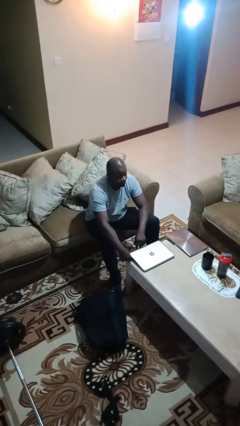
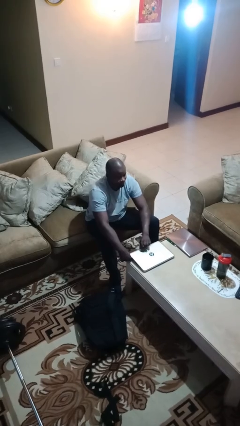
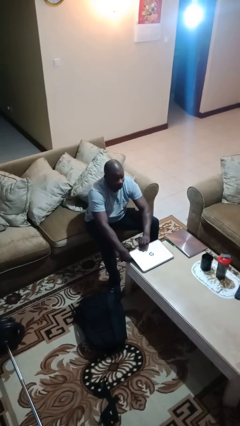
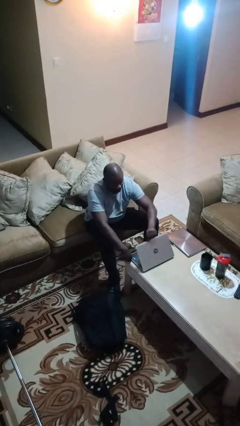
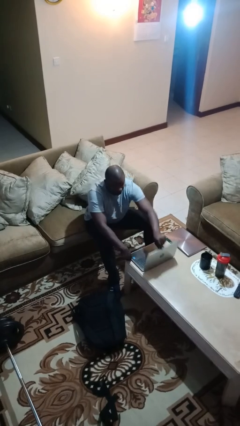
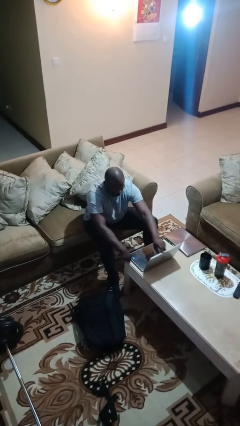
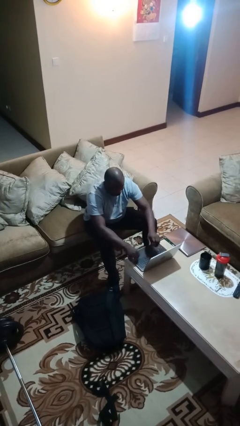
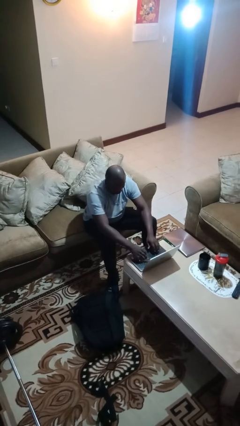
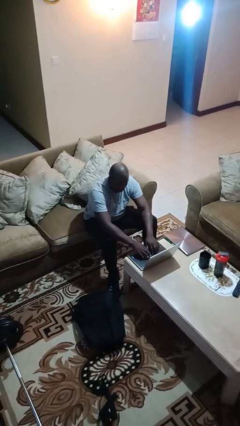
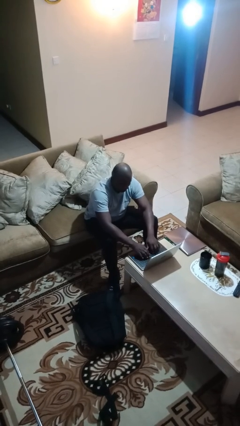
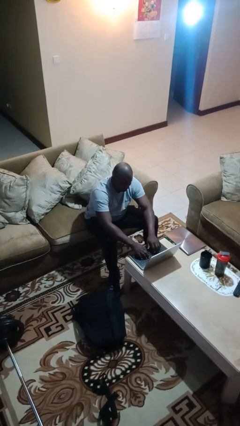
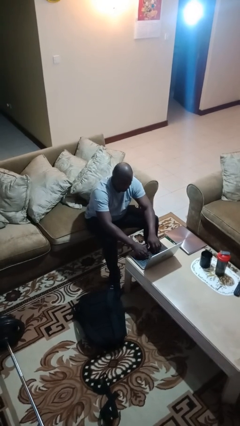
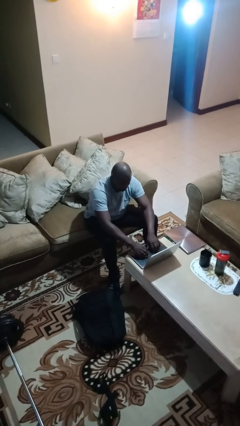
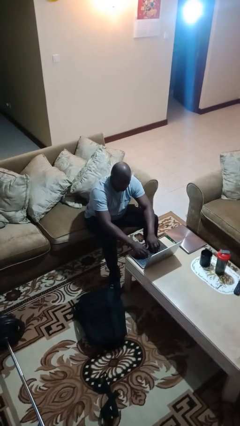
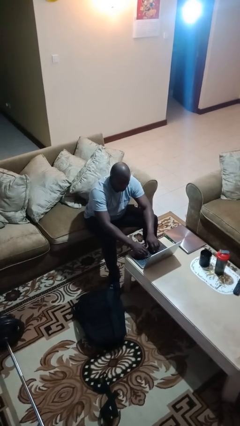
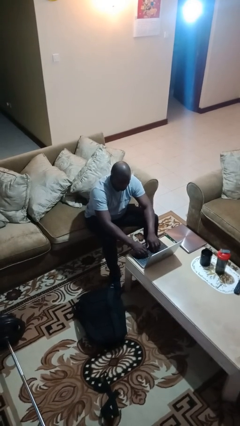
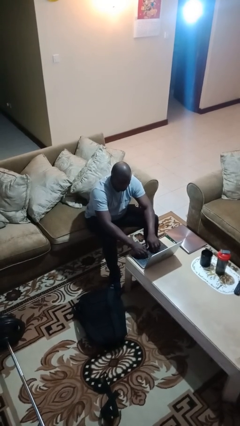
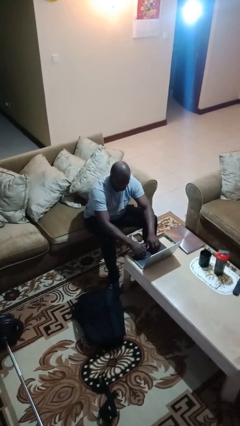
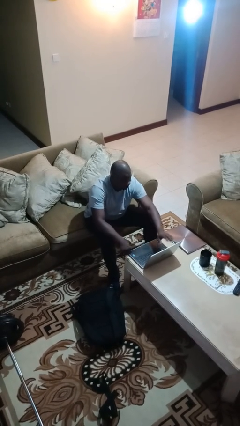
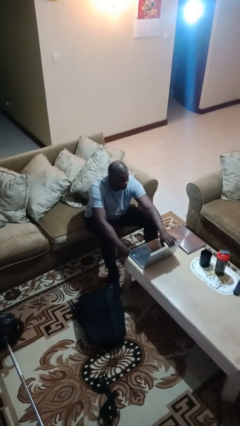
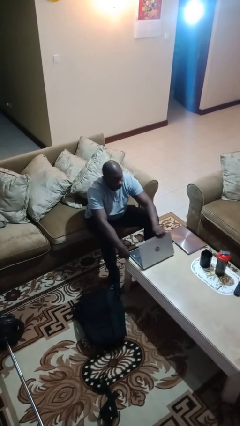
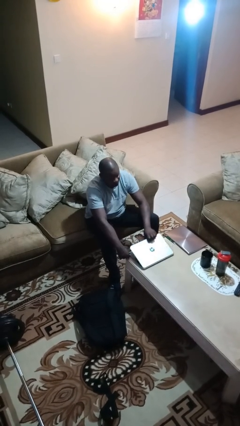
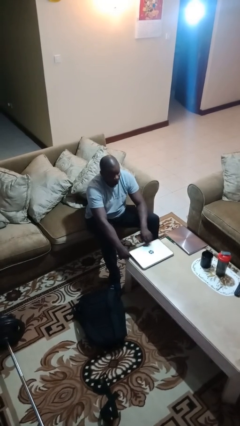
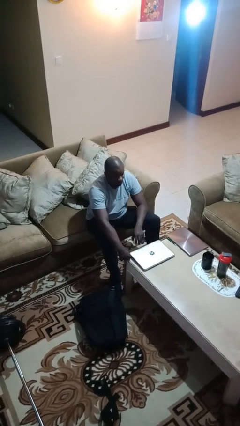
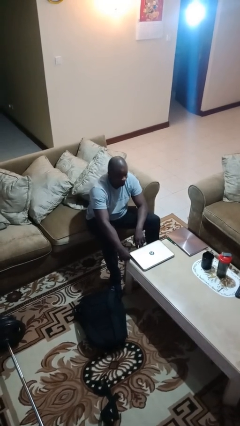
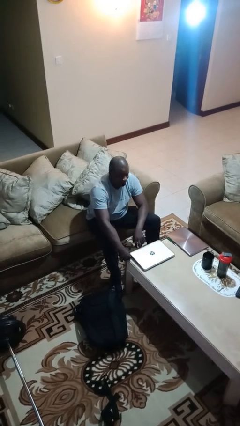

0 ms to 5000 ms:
person interacts with laptop

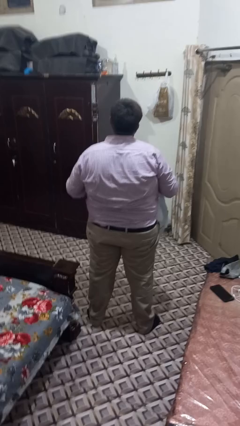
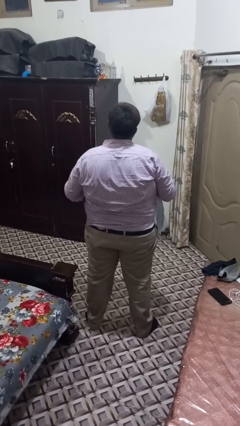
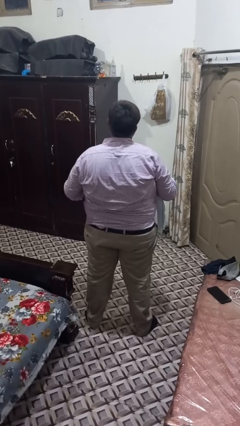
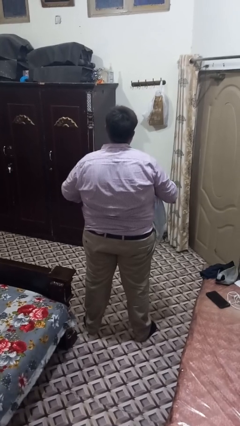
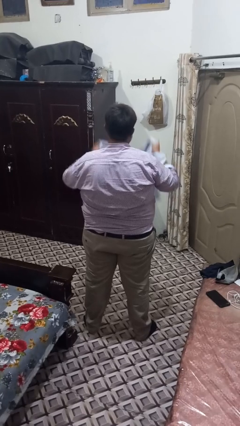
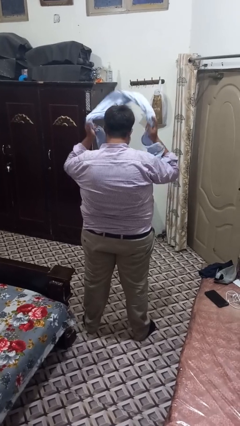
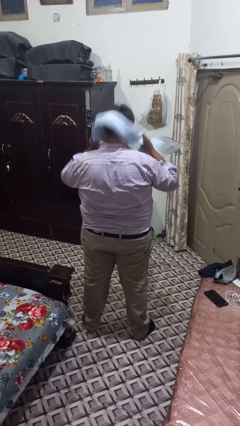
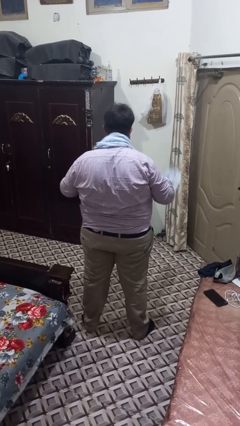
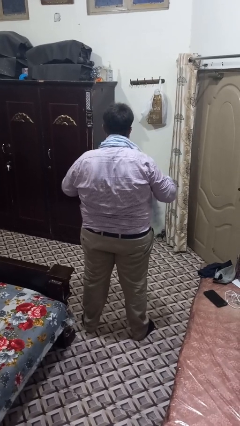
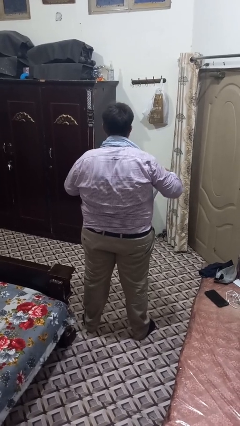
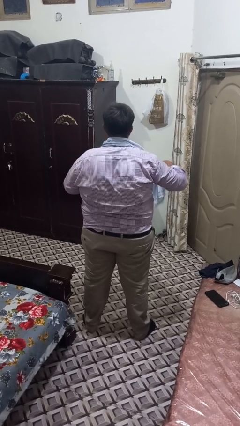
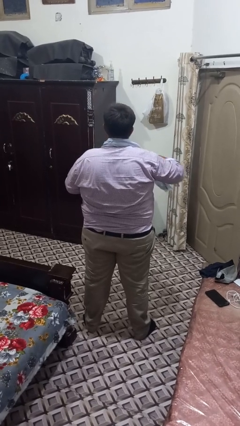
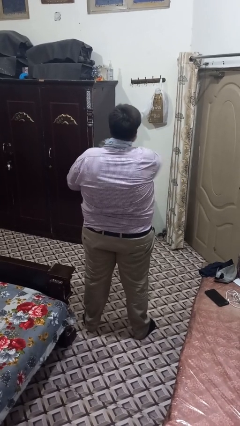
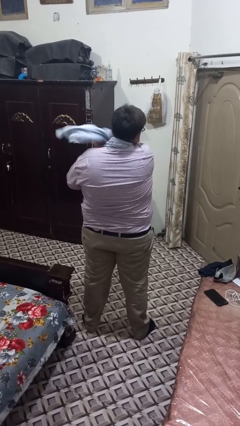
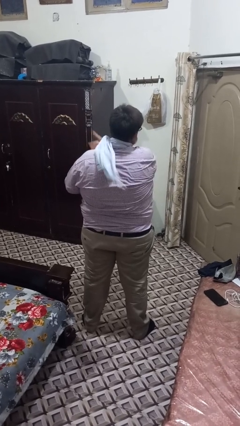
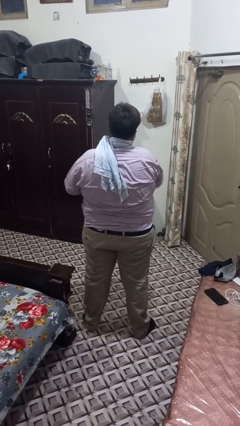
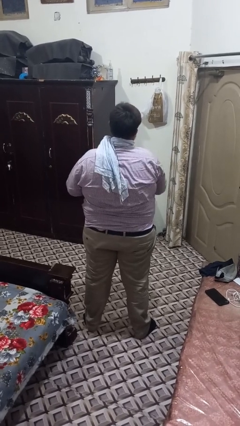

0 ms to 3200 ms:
person puts on scarf

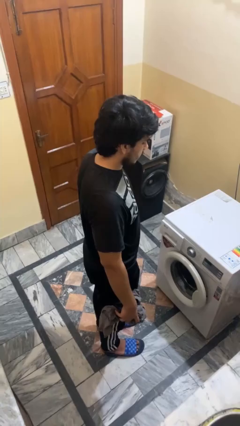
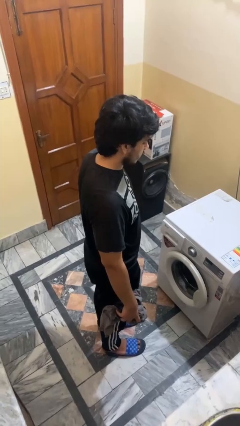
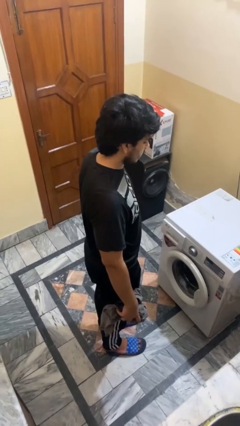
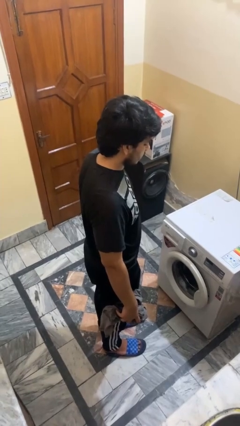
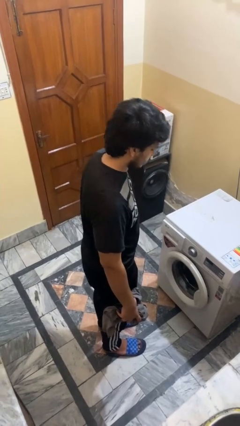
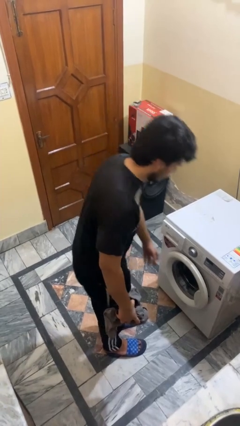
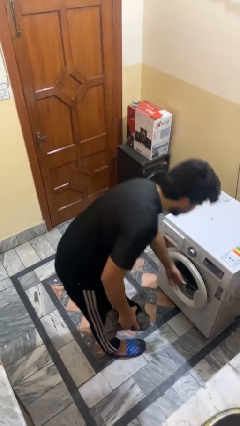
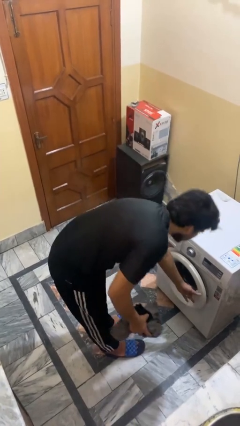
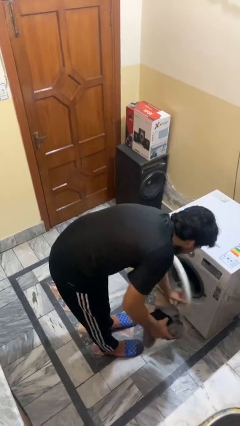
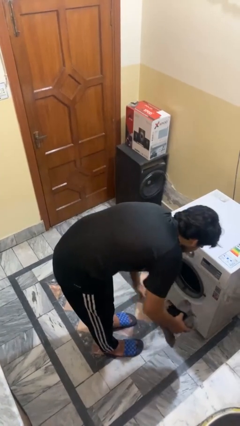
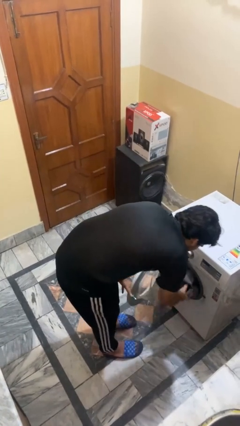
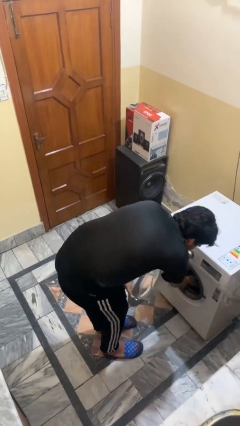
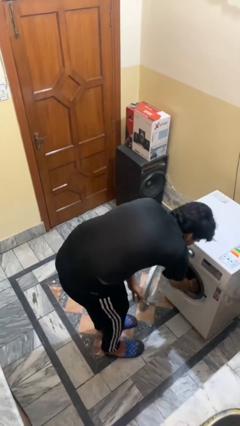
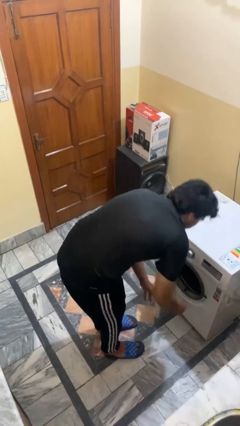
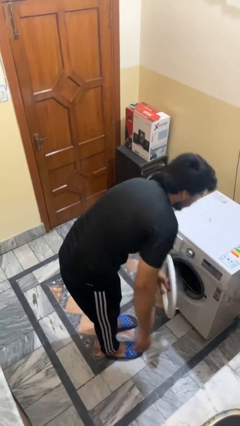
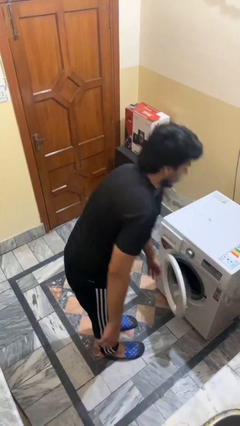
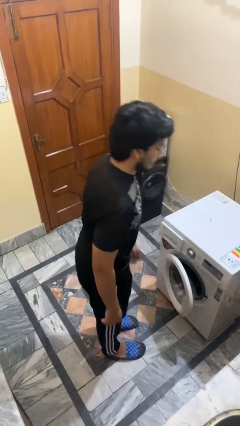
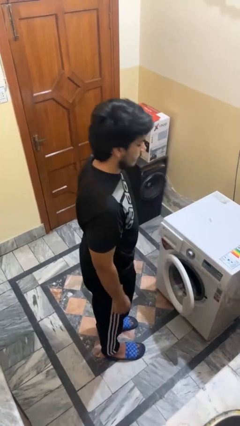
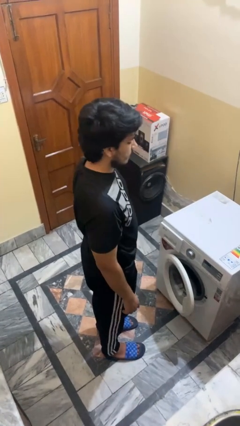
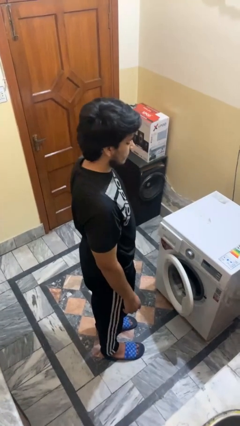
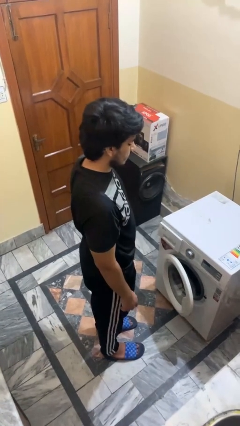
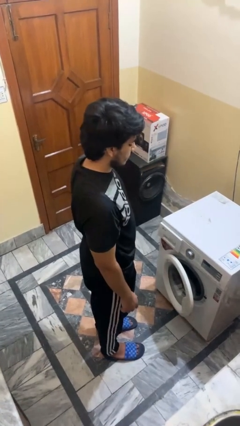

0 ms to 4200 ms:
person loads dryer

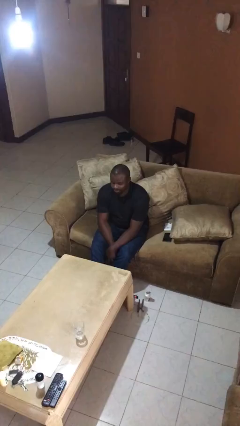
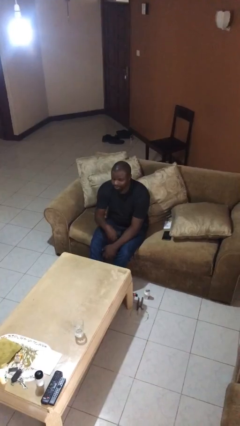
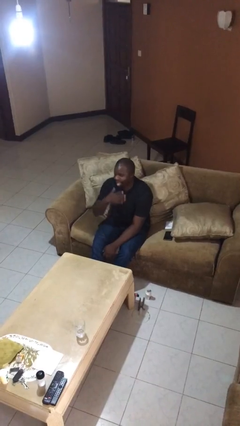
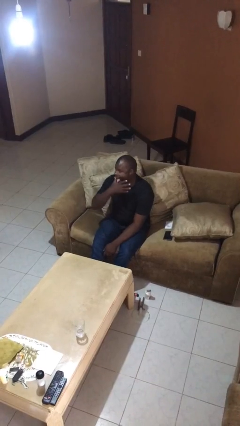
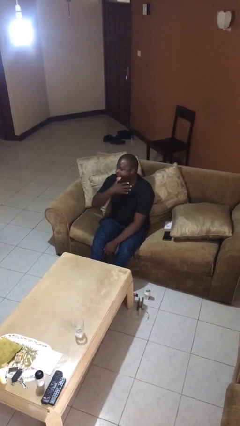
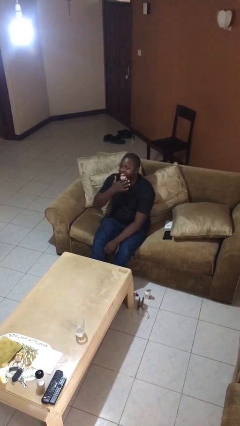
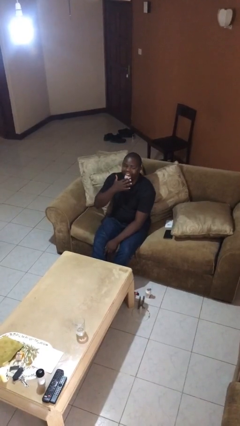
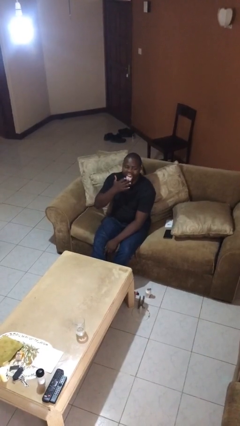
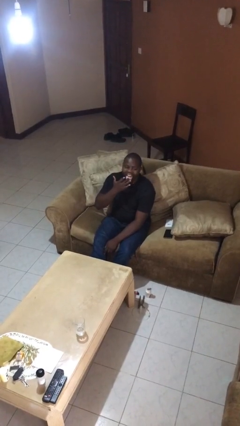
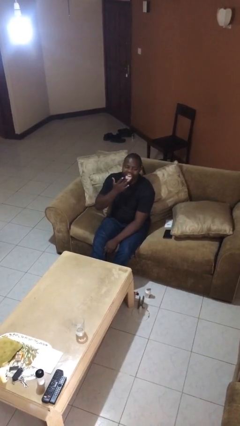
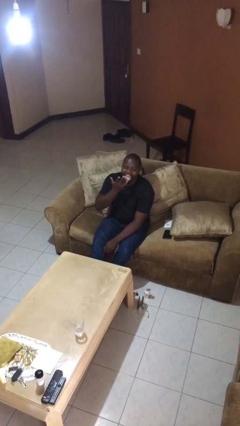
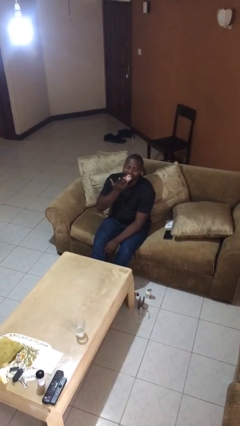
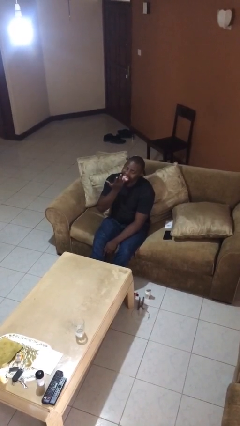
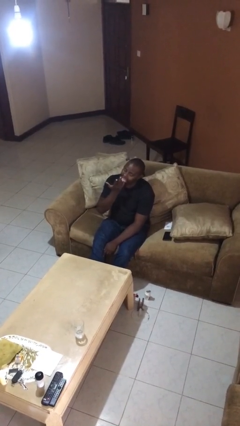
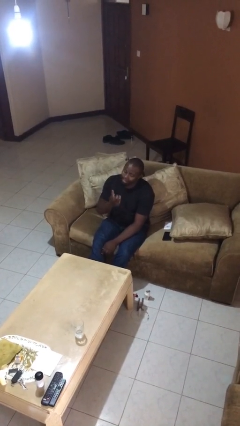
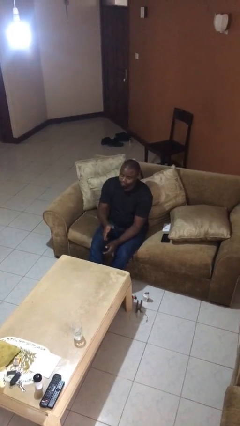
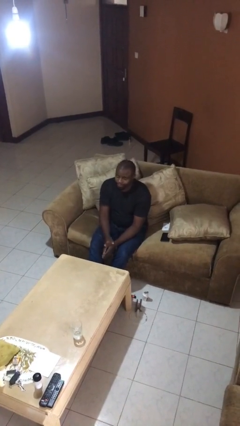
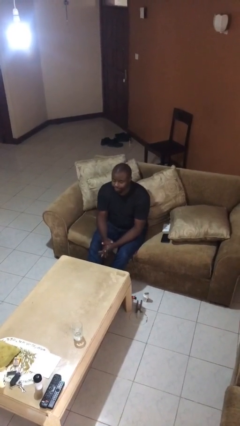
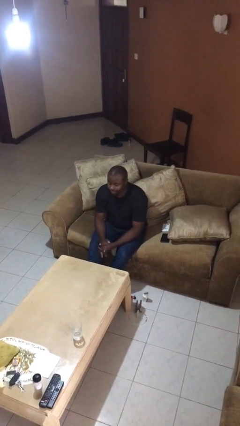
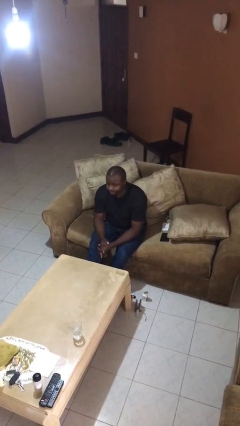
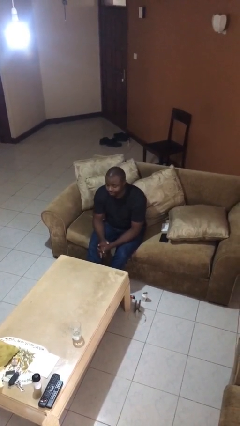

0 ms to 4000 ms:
person licks fingers

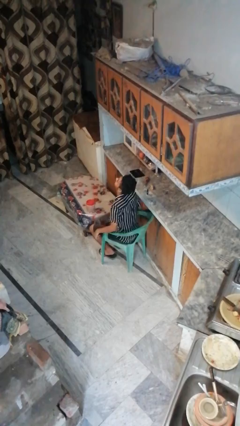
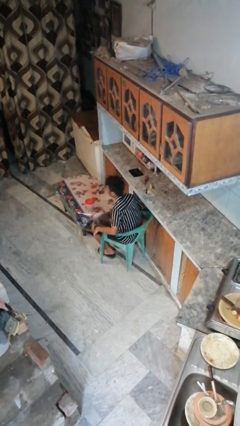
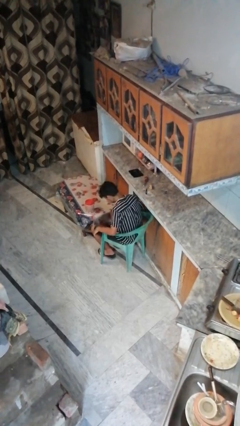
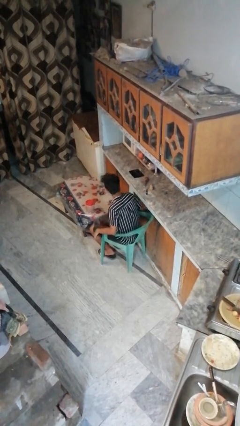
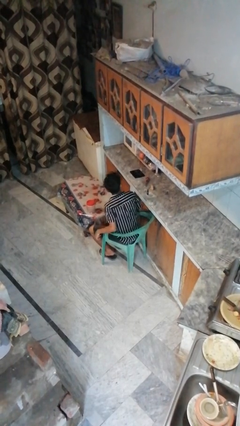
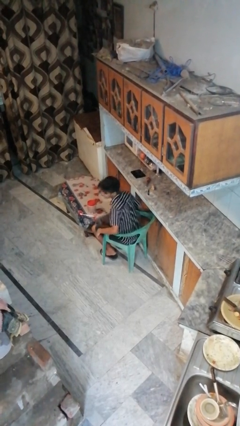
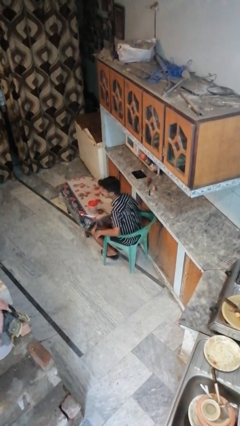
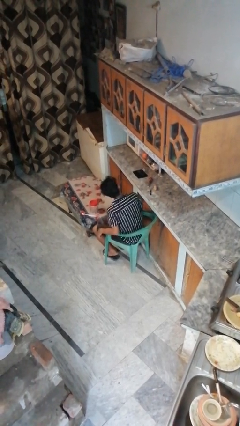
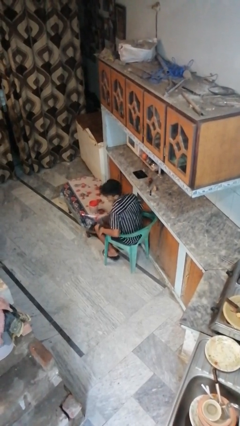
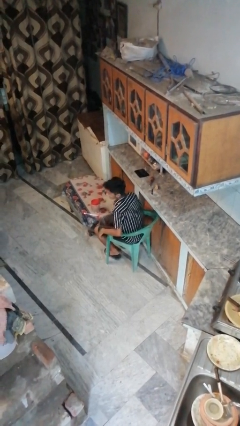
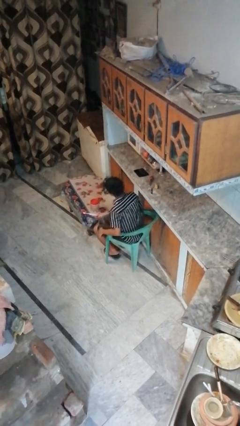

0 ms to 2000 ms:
person shakes head
